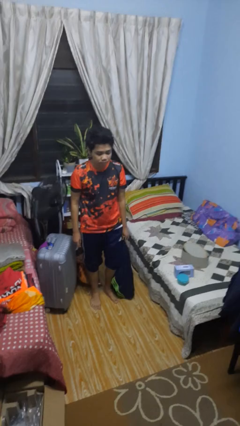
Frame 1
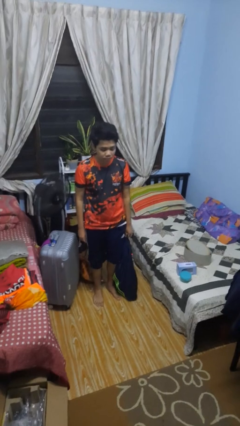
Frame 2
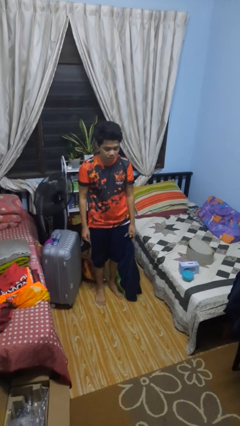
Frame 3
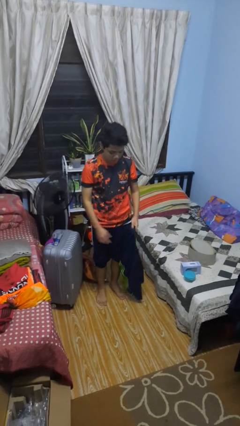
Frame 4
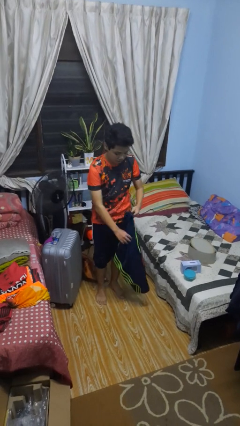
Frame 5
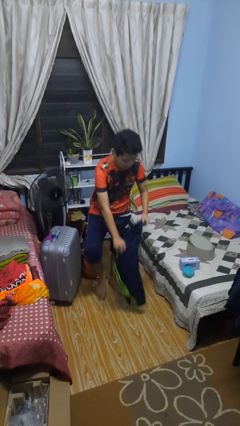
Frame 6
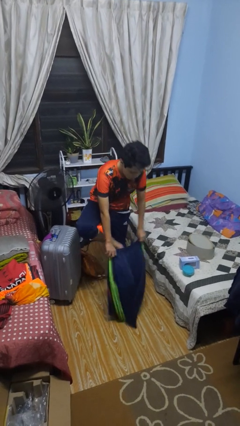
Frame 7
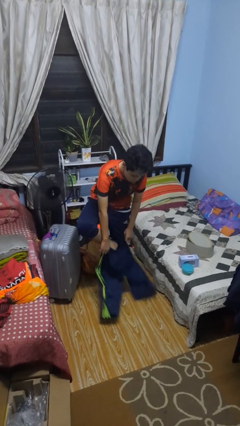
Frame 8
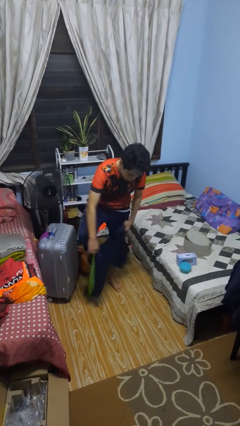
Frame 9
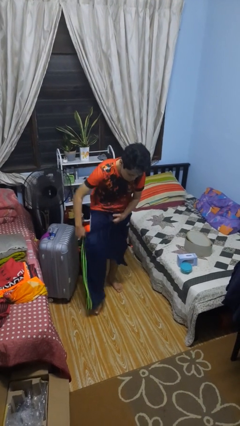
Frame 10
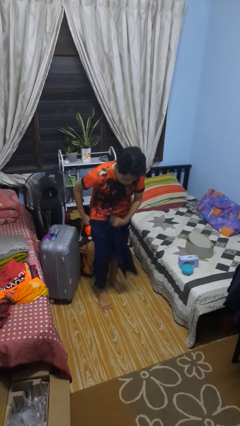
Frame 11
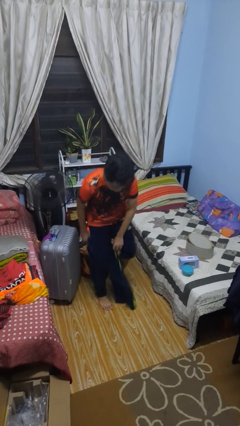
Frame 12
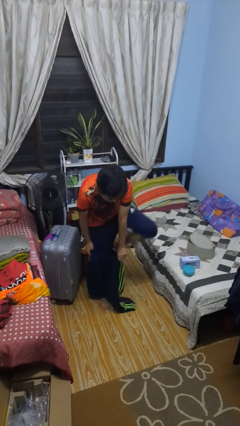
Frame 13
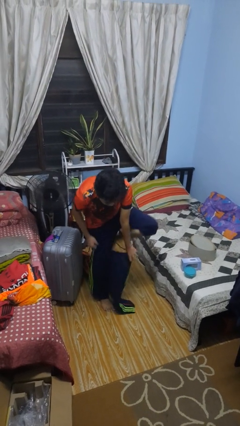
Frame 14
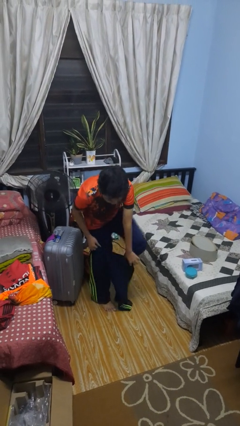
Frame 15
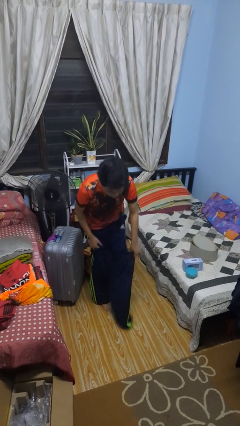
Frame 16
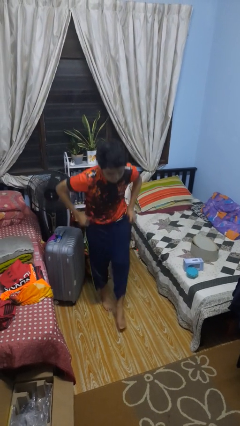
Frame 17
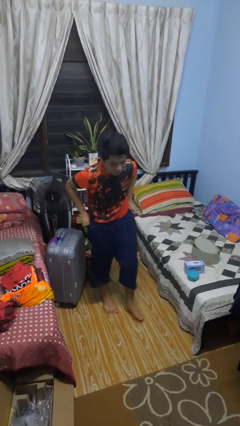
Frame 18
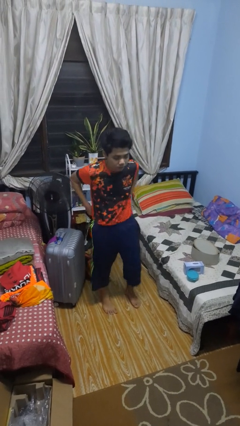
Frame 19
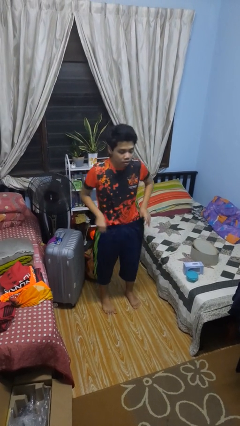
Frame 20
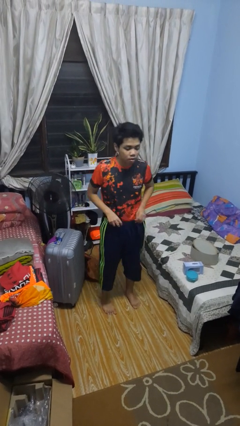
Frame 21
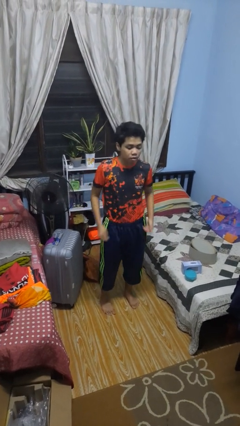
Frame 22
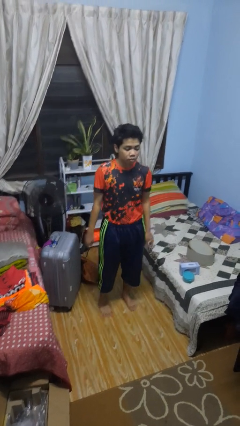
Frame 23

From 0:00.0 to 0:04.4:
person puts on pants

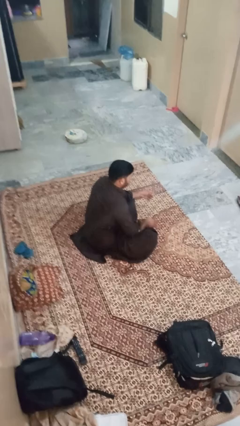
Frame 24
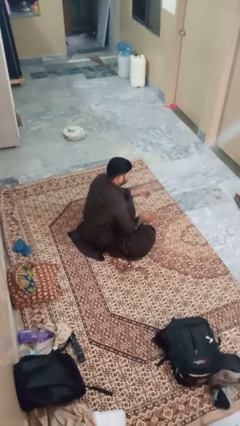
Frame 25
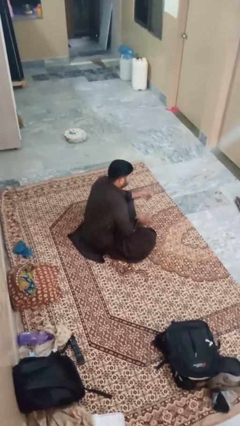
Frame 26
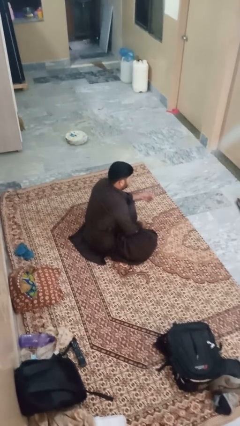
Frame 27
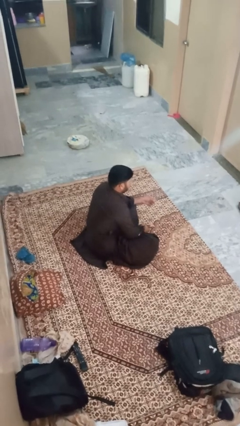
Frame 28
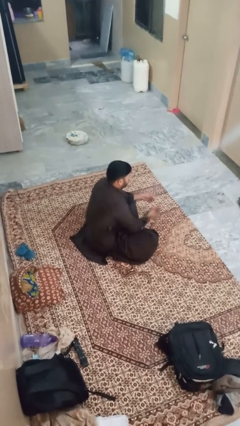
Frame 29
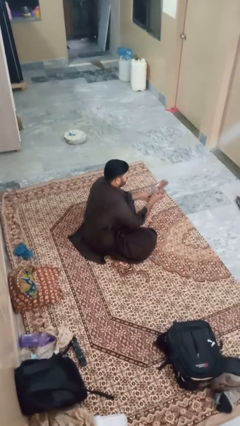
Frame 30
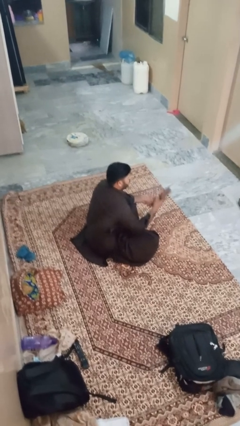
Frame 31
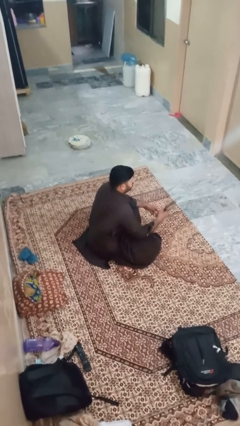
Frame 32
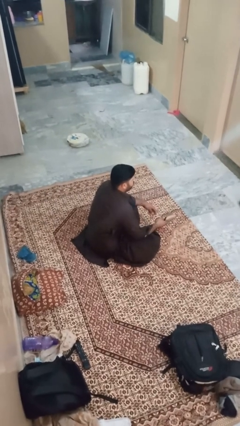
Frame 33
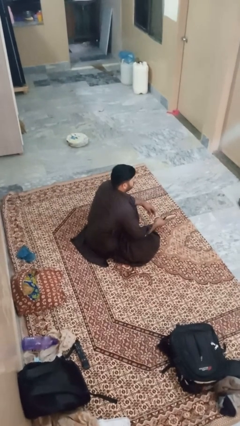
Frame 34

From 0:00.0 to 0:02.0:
person picks up object from floor

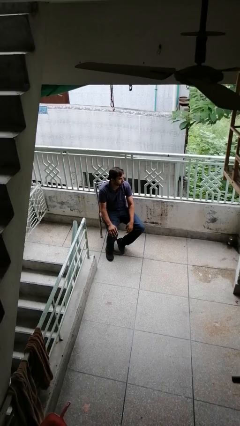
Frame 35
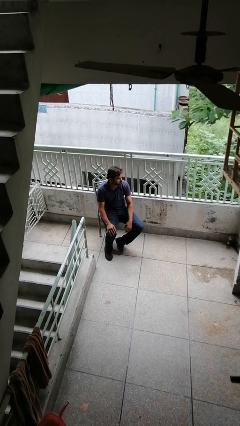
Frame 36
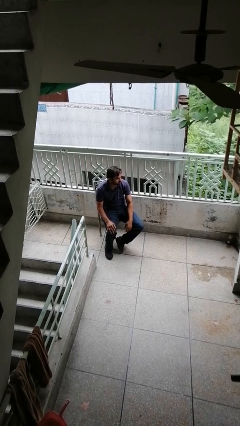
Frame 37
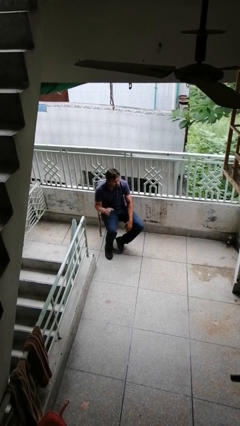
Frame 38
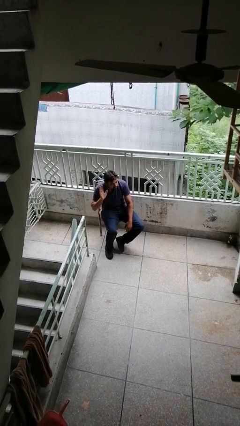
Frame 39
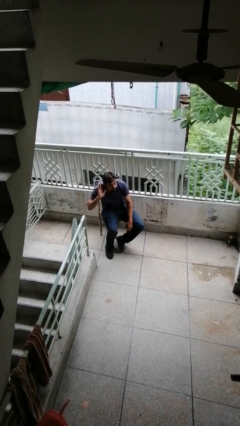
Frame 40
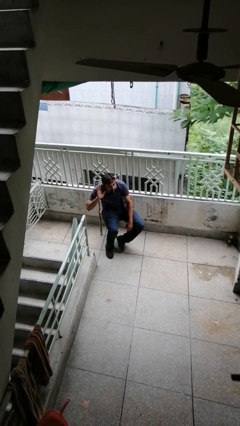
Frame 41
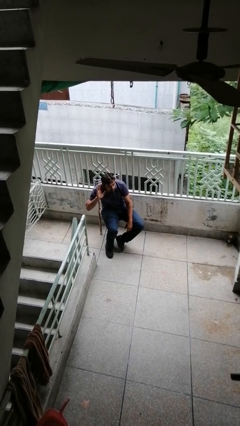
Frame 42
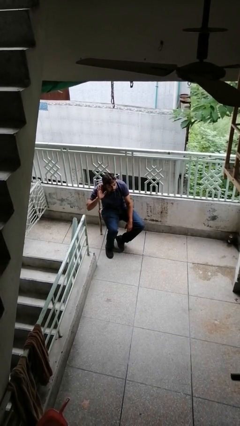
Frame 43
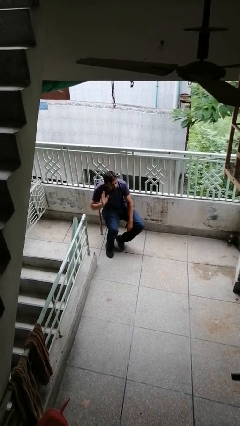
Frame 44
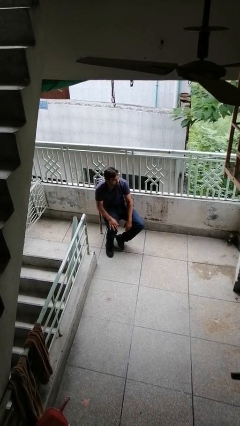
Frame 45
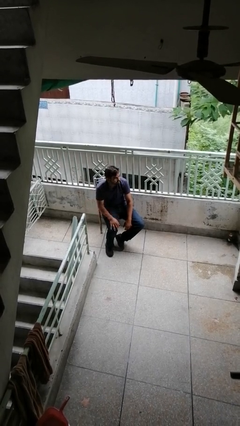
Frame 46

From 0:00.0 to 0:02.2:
person gestures listen closely

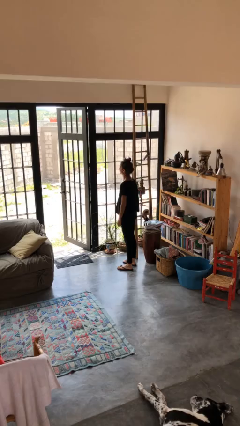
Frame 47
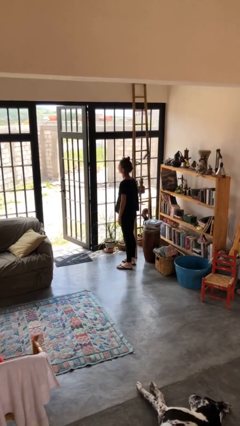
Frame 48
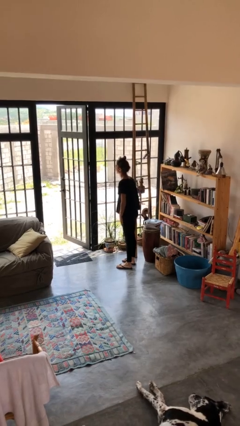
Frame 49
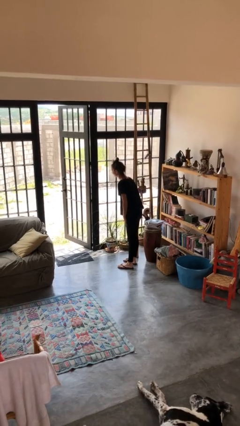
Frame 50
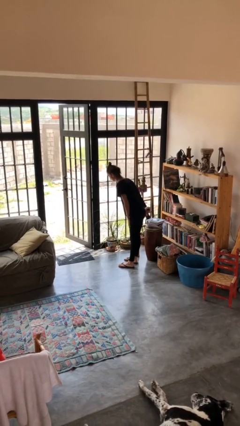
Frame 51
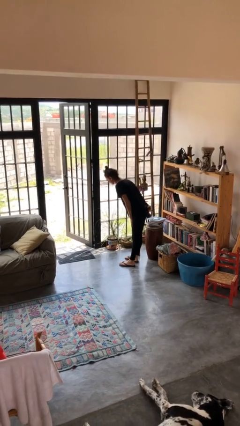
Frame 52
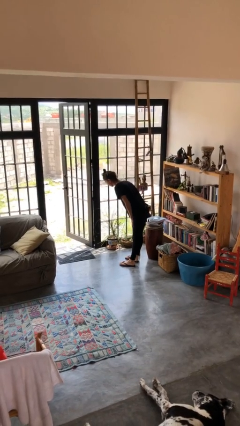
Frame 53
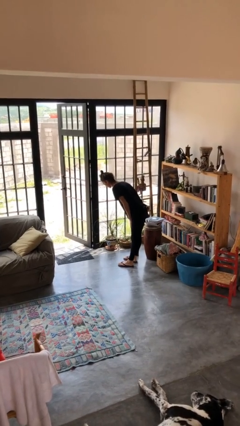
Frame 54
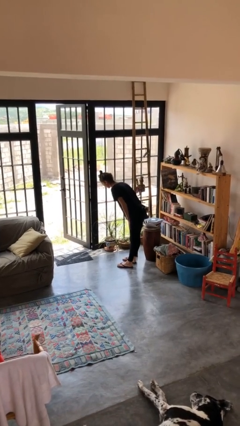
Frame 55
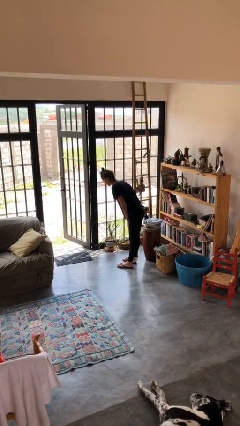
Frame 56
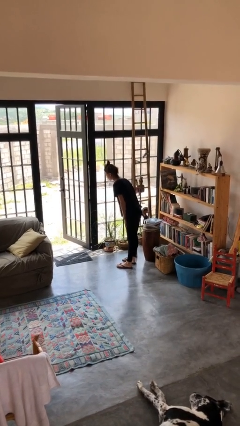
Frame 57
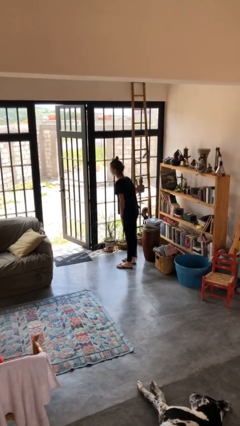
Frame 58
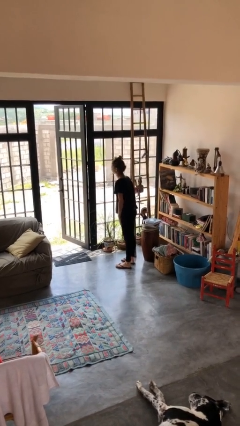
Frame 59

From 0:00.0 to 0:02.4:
person bows

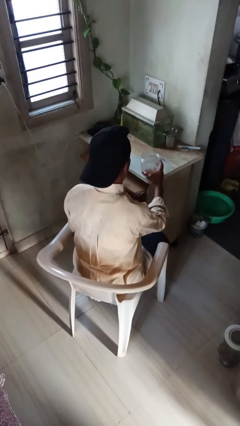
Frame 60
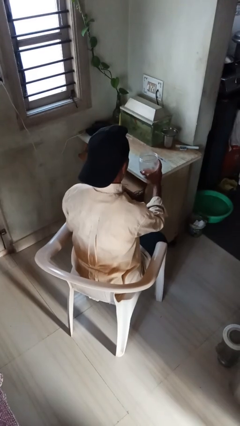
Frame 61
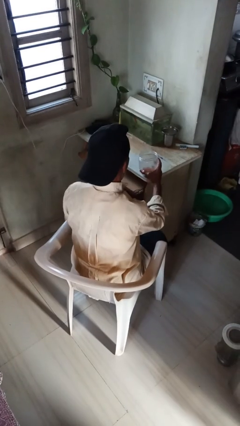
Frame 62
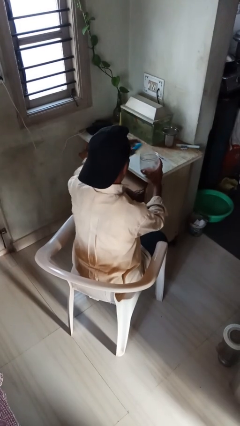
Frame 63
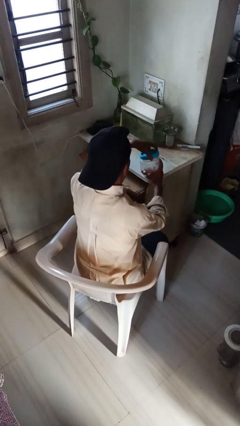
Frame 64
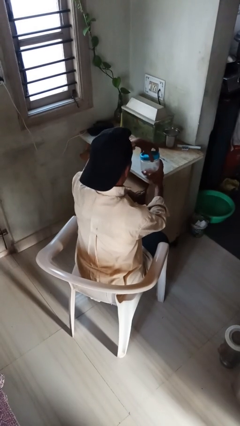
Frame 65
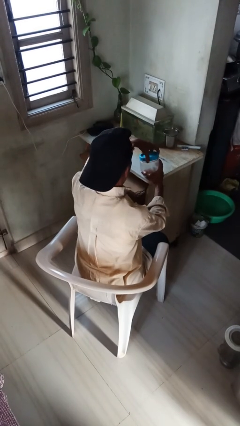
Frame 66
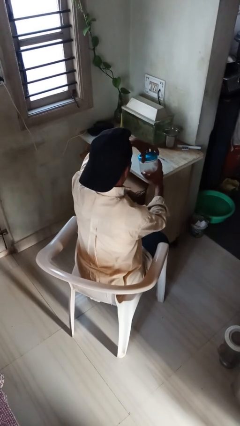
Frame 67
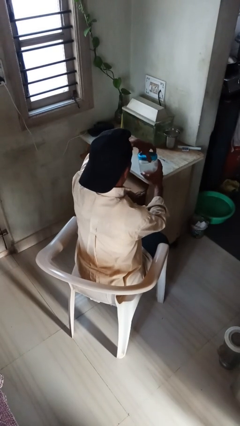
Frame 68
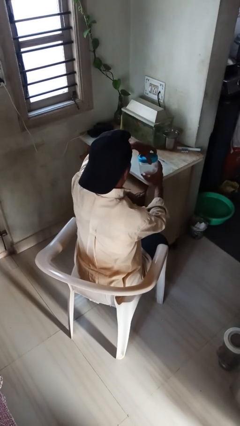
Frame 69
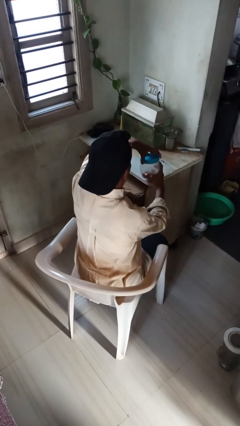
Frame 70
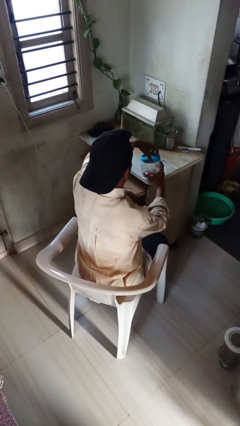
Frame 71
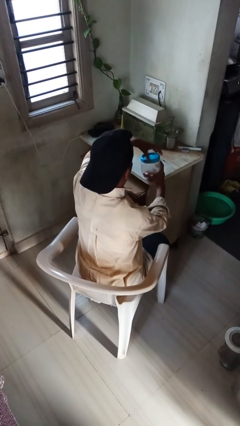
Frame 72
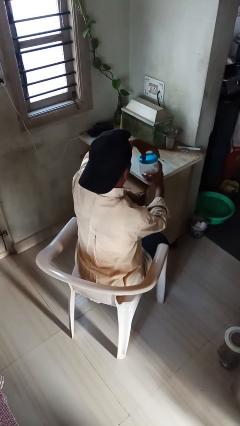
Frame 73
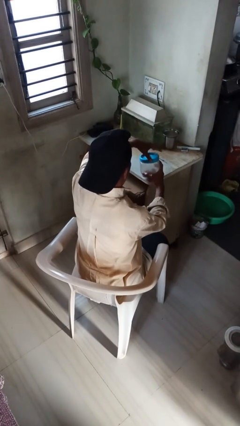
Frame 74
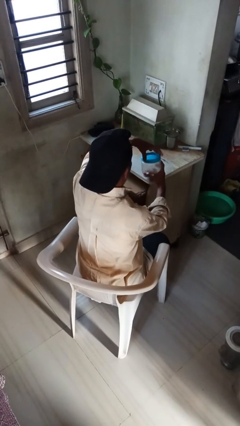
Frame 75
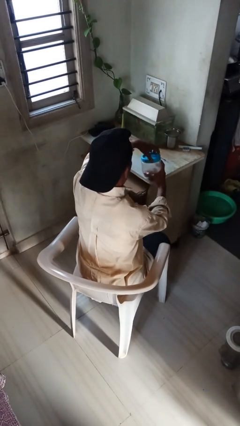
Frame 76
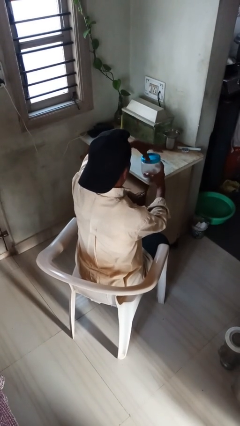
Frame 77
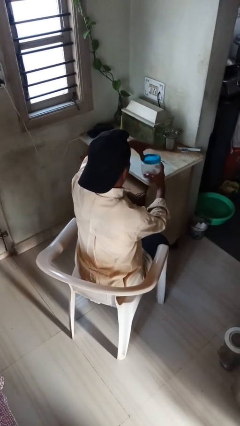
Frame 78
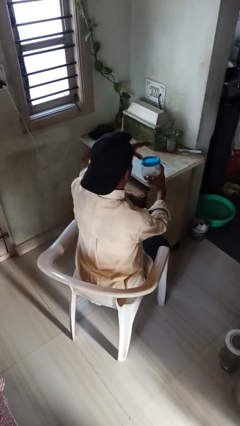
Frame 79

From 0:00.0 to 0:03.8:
person closes jar

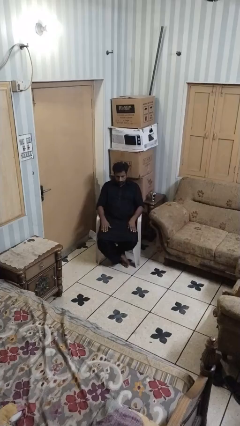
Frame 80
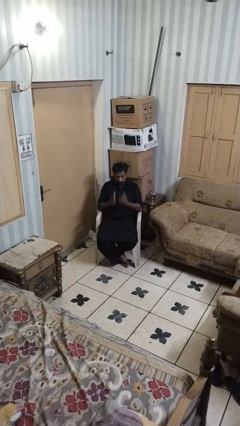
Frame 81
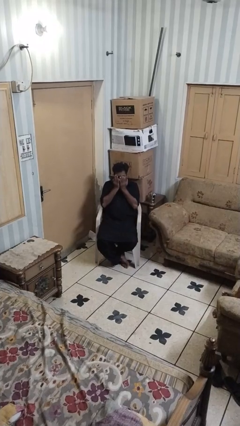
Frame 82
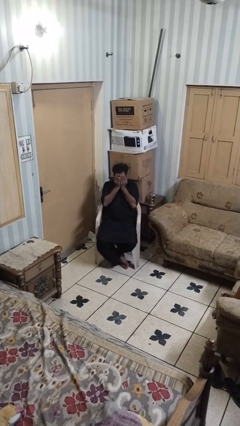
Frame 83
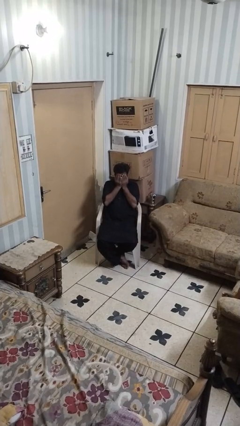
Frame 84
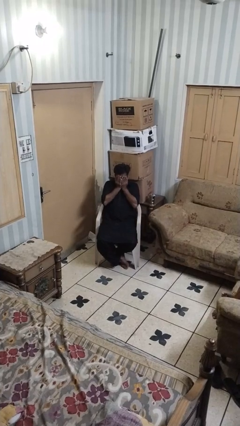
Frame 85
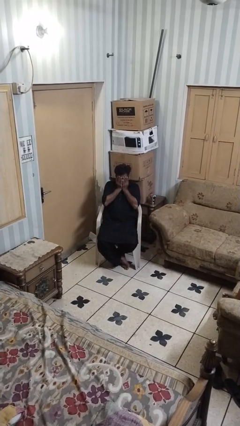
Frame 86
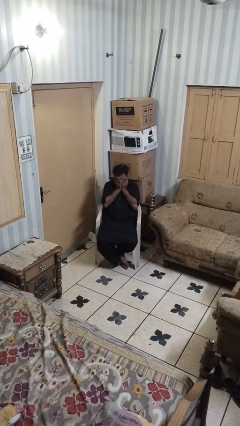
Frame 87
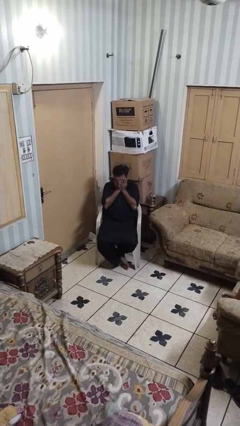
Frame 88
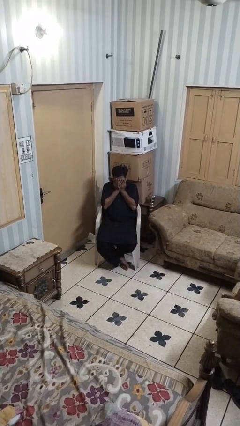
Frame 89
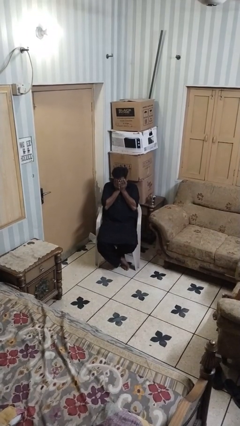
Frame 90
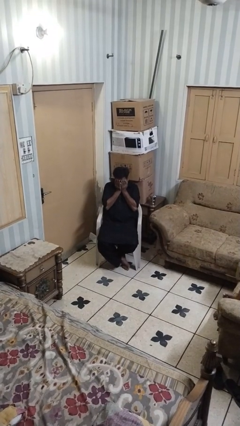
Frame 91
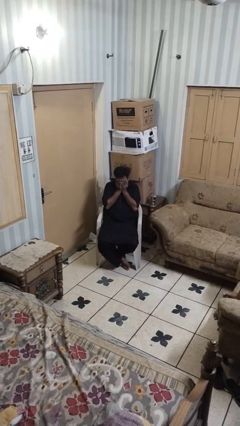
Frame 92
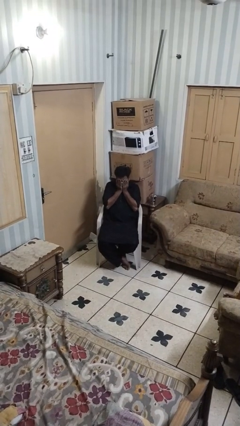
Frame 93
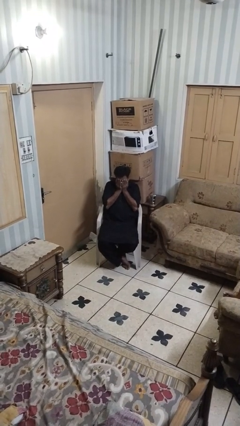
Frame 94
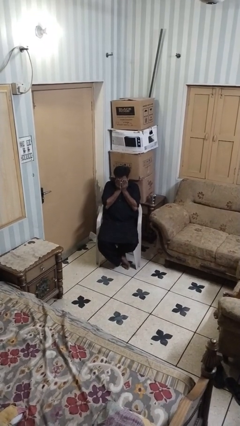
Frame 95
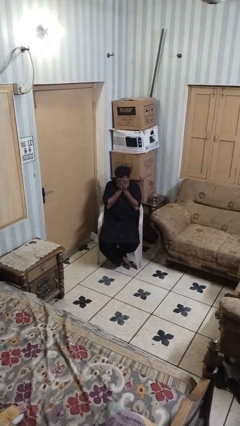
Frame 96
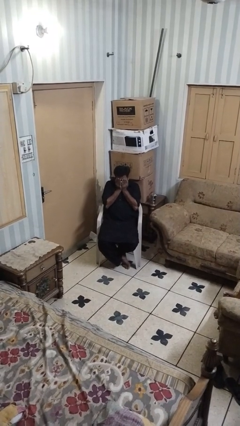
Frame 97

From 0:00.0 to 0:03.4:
person covers face with hands
